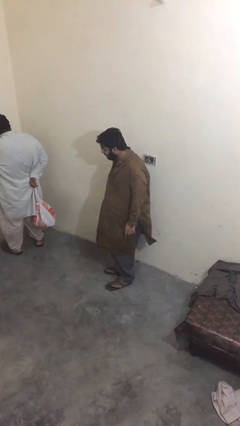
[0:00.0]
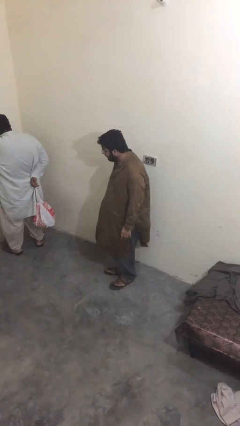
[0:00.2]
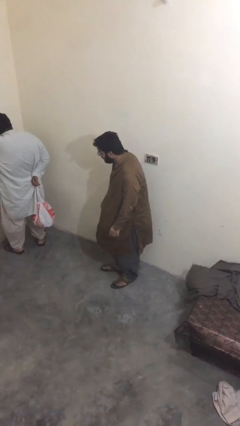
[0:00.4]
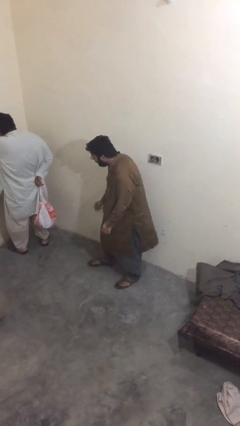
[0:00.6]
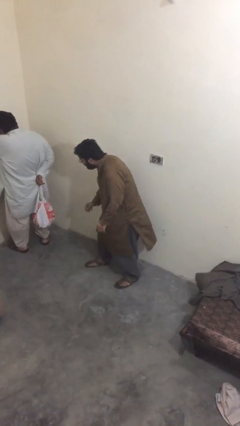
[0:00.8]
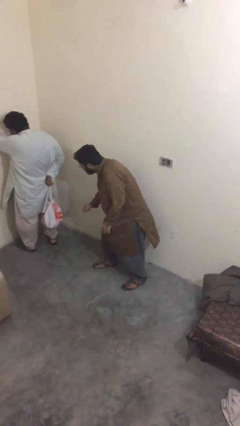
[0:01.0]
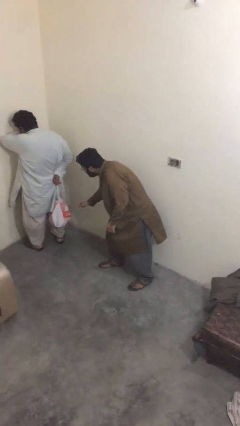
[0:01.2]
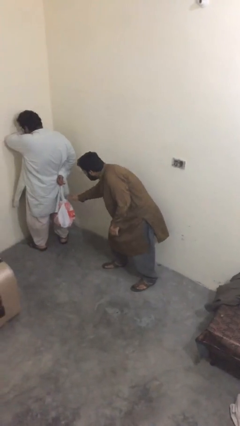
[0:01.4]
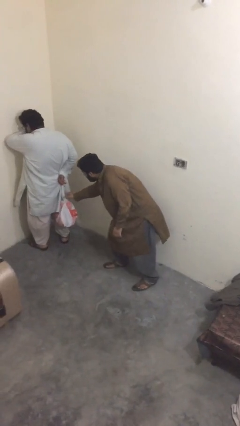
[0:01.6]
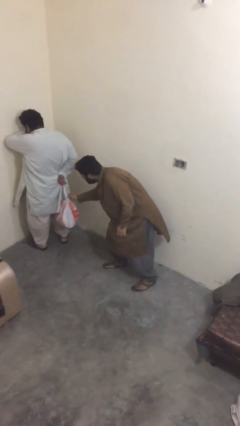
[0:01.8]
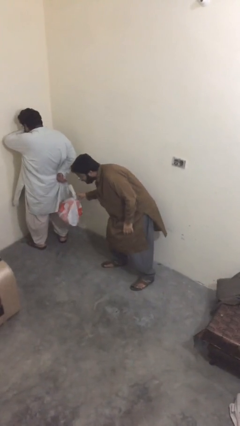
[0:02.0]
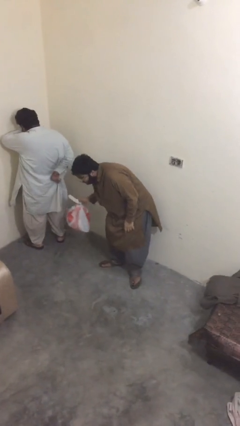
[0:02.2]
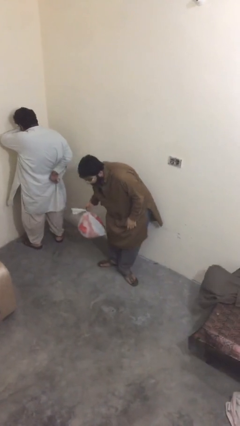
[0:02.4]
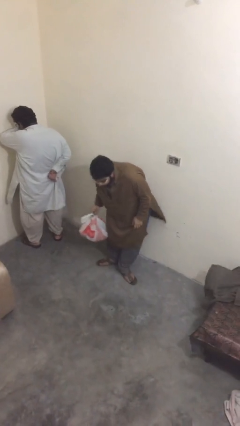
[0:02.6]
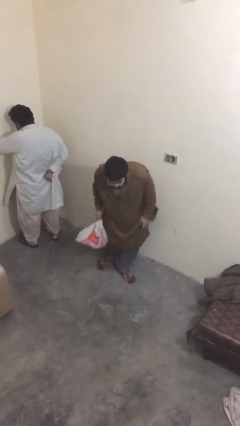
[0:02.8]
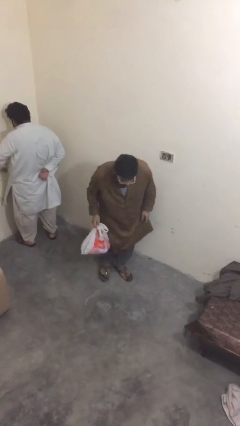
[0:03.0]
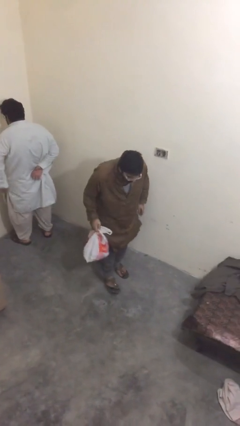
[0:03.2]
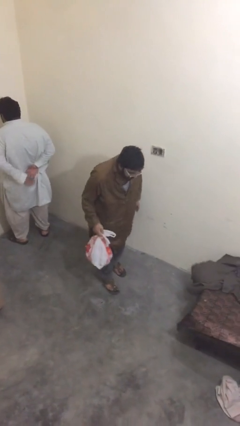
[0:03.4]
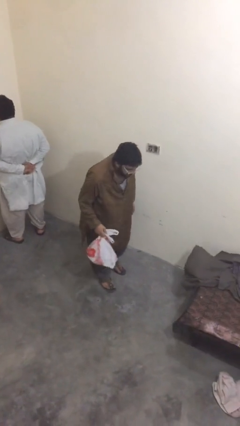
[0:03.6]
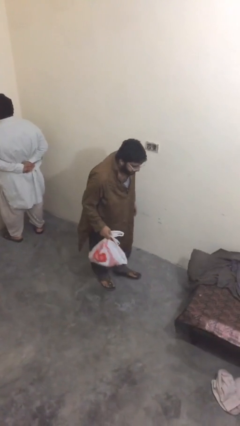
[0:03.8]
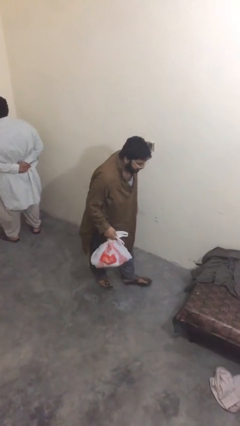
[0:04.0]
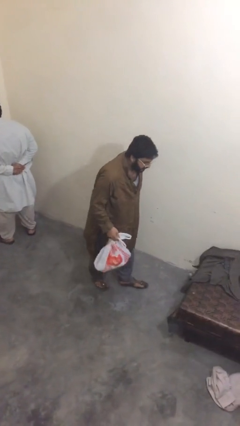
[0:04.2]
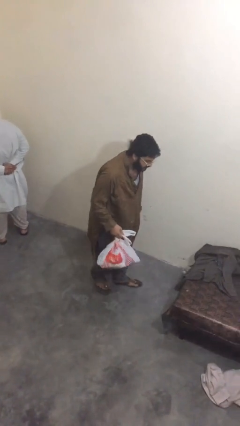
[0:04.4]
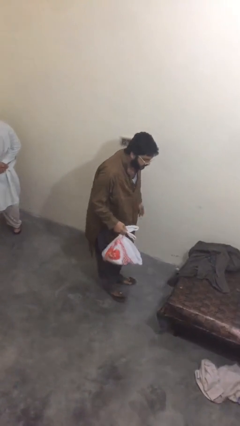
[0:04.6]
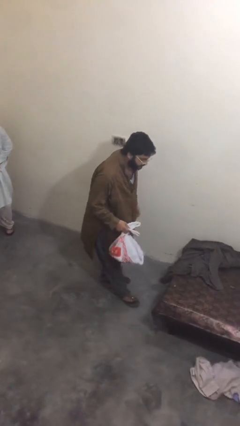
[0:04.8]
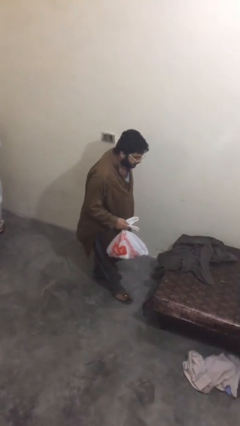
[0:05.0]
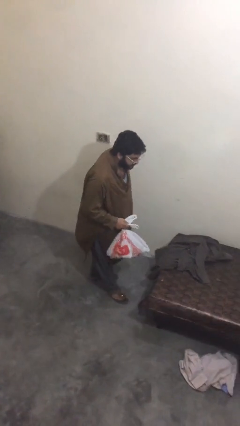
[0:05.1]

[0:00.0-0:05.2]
person steals object from person

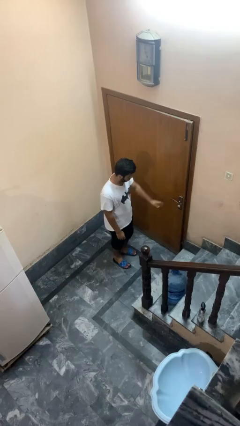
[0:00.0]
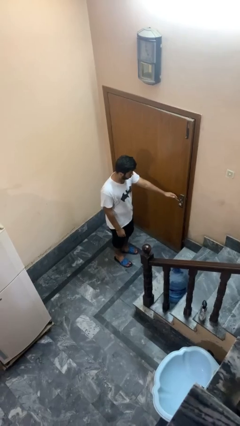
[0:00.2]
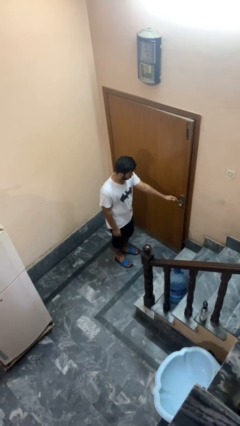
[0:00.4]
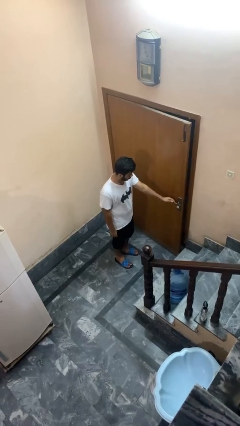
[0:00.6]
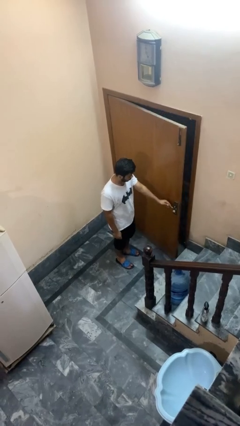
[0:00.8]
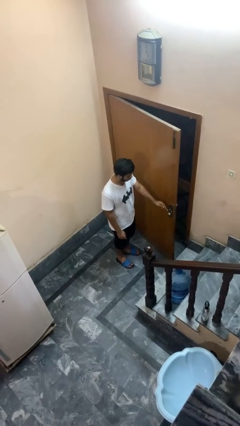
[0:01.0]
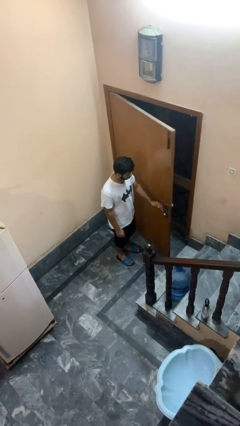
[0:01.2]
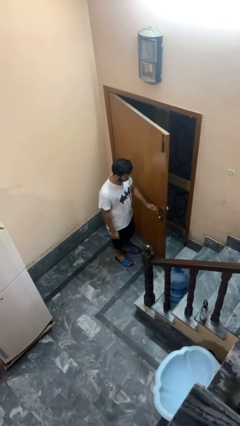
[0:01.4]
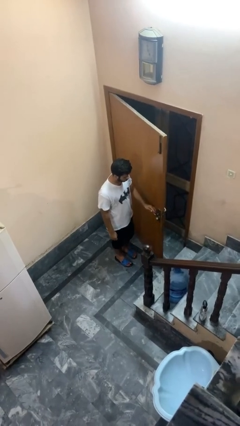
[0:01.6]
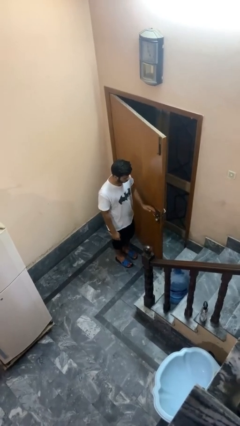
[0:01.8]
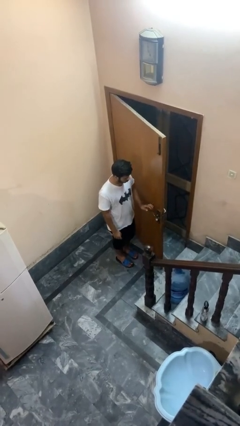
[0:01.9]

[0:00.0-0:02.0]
person opens facility door

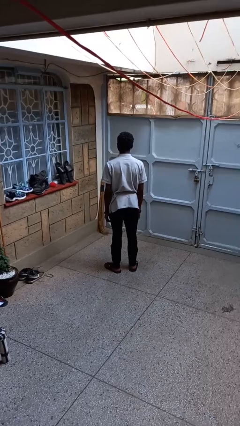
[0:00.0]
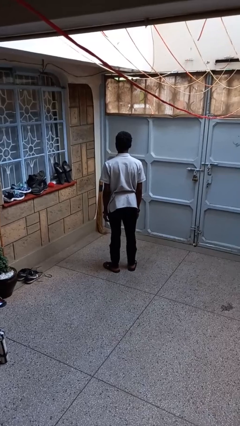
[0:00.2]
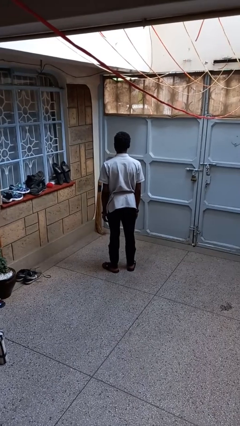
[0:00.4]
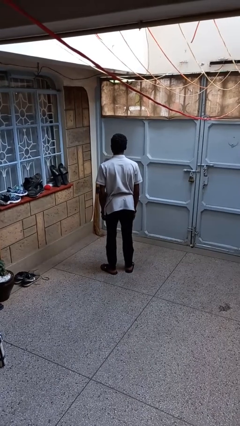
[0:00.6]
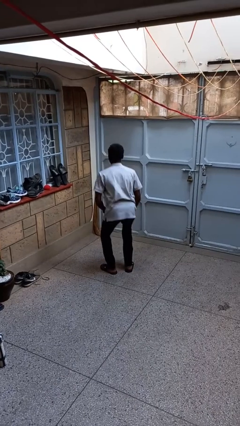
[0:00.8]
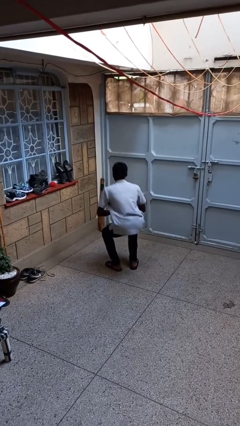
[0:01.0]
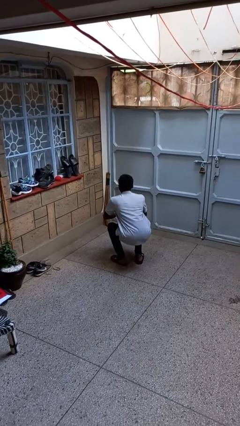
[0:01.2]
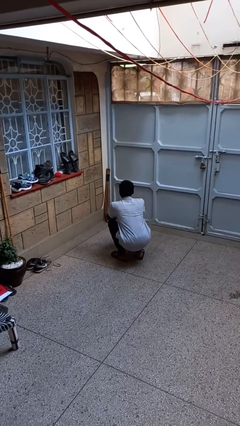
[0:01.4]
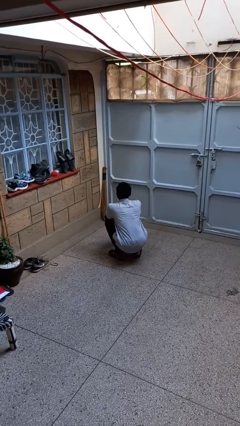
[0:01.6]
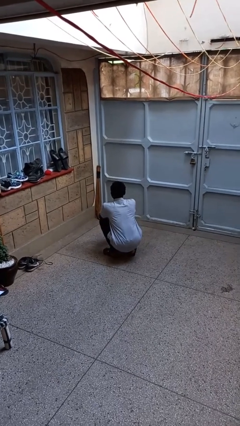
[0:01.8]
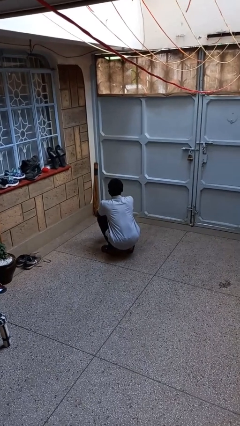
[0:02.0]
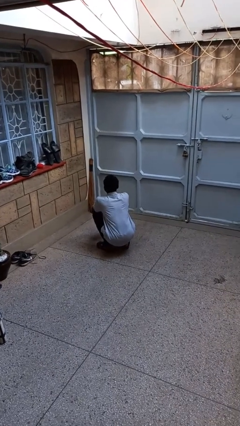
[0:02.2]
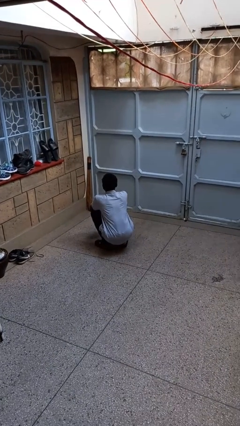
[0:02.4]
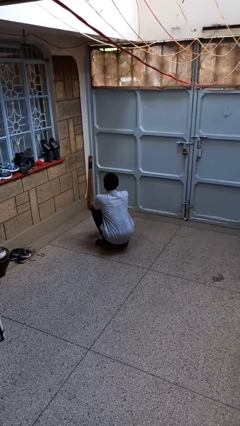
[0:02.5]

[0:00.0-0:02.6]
person squats

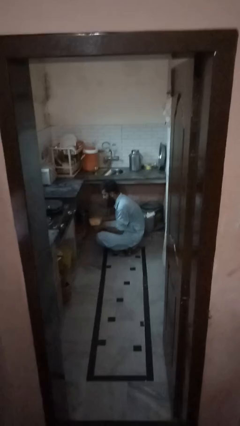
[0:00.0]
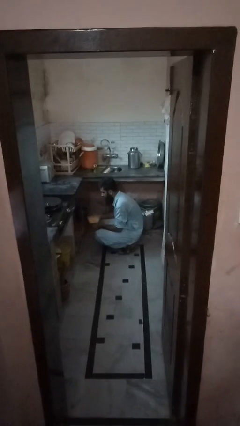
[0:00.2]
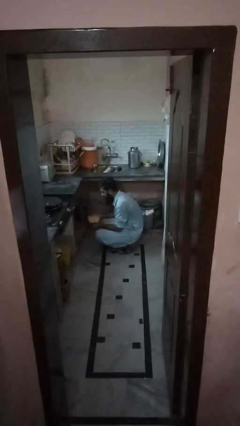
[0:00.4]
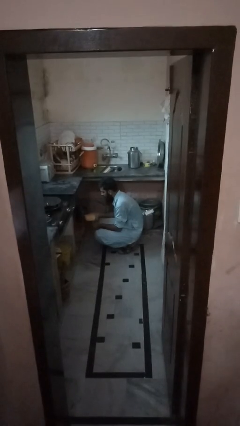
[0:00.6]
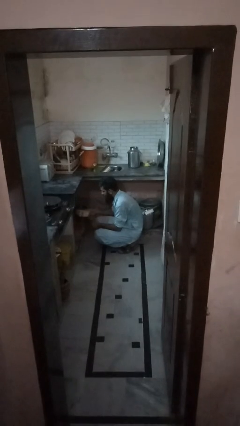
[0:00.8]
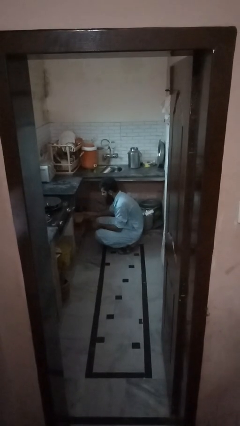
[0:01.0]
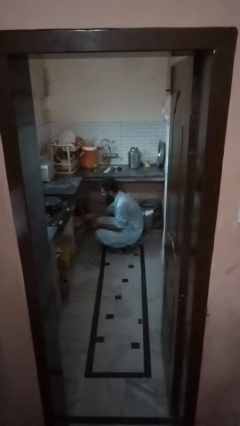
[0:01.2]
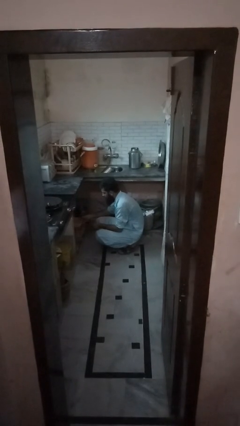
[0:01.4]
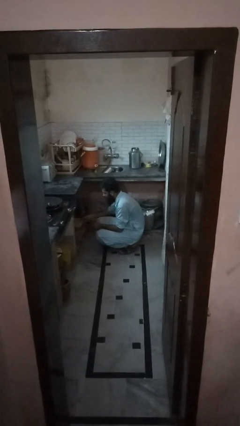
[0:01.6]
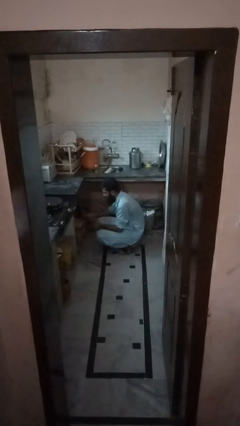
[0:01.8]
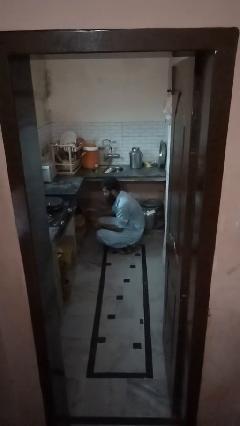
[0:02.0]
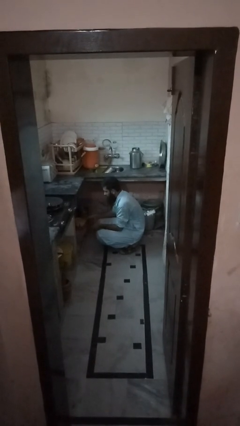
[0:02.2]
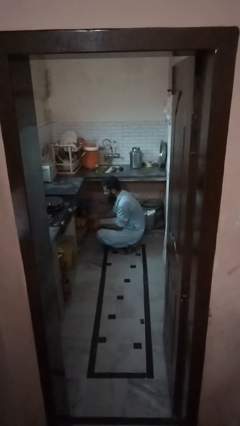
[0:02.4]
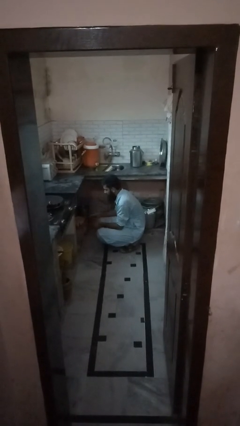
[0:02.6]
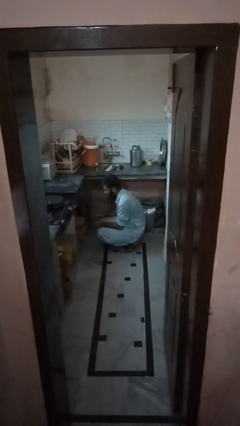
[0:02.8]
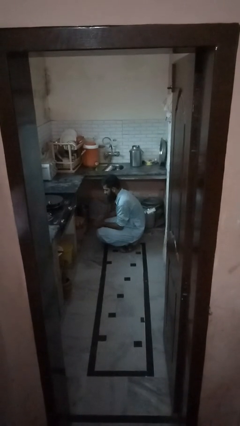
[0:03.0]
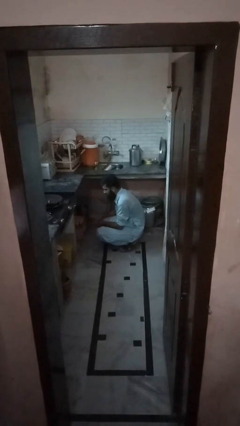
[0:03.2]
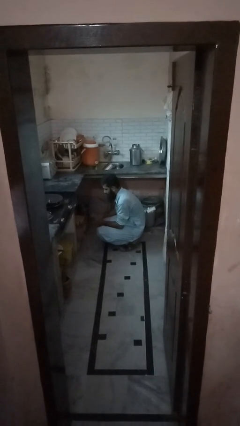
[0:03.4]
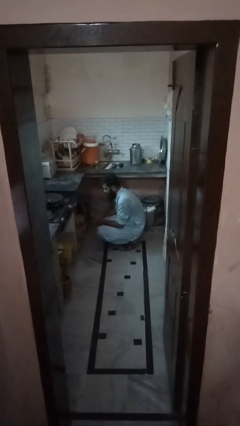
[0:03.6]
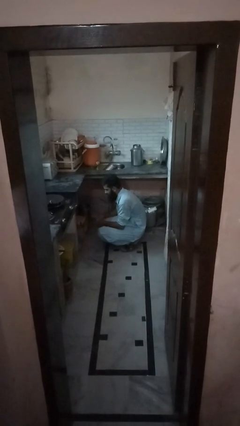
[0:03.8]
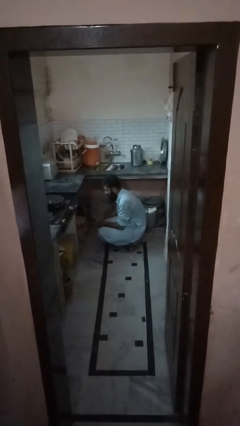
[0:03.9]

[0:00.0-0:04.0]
person puts down object into cabinet

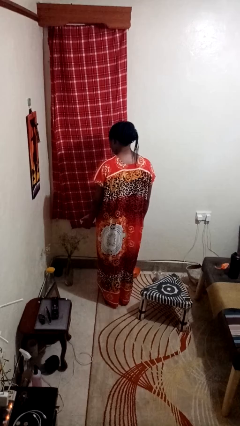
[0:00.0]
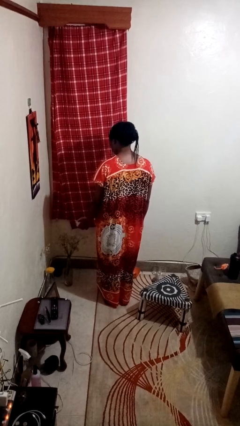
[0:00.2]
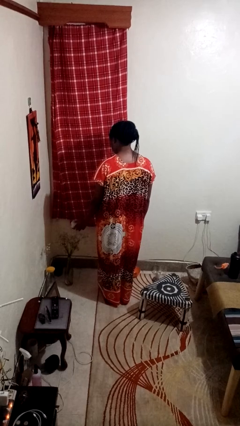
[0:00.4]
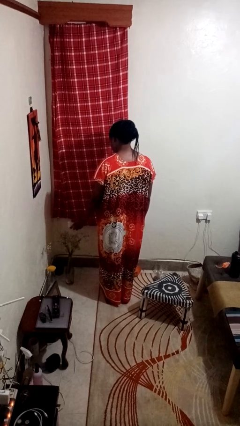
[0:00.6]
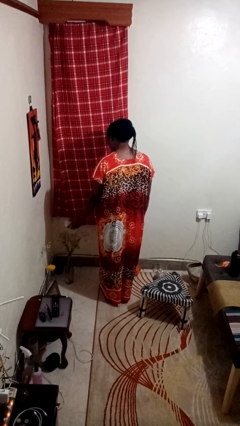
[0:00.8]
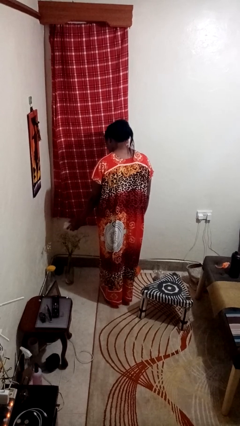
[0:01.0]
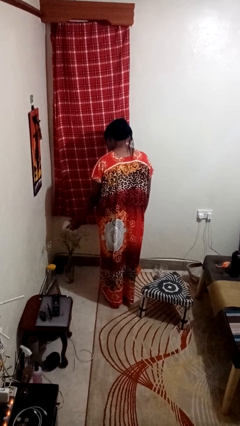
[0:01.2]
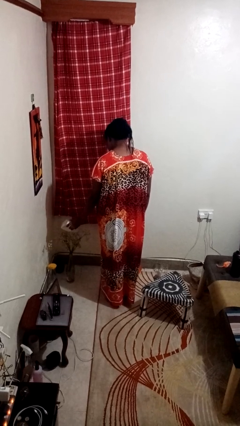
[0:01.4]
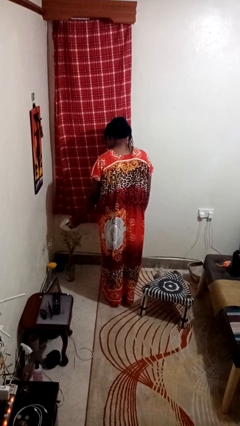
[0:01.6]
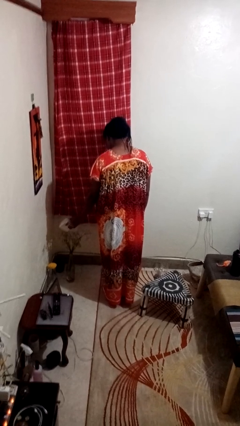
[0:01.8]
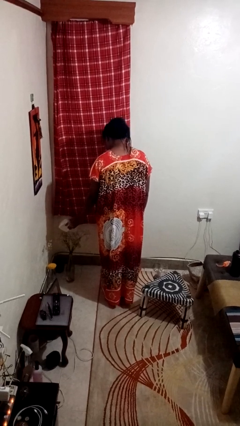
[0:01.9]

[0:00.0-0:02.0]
person waters houseplant

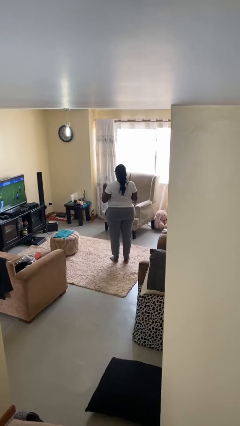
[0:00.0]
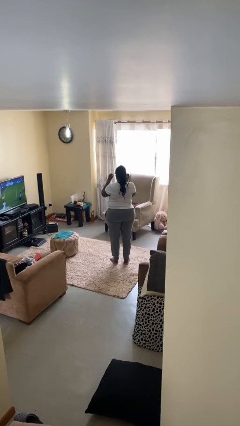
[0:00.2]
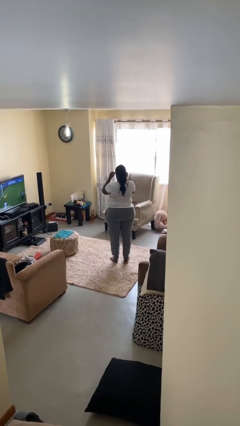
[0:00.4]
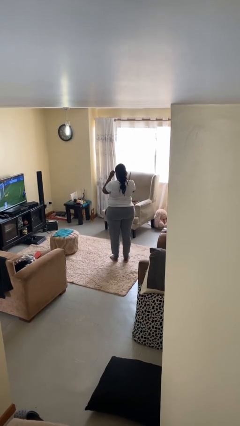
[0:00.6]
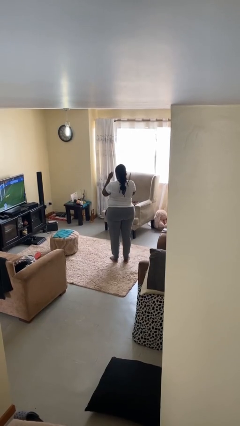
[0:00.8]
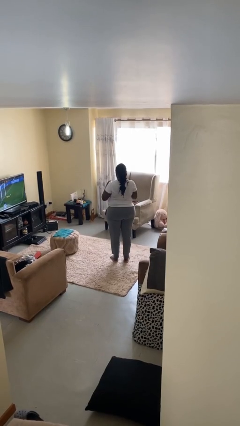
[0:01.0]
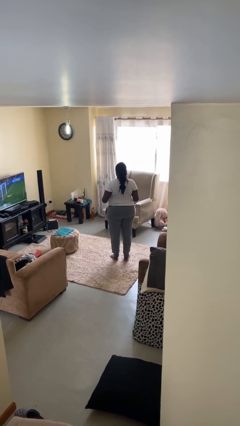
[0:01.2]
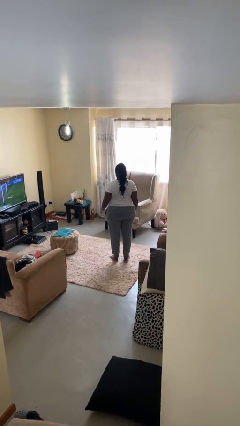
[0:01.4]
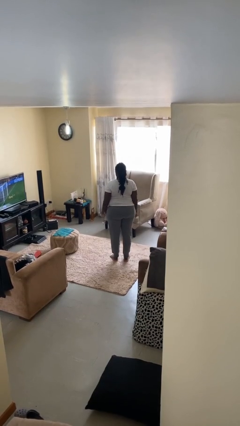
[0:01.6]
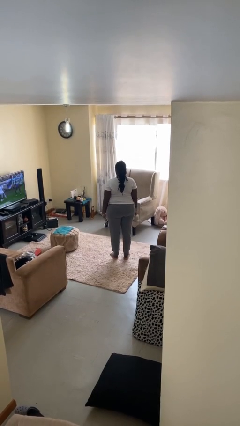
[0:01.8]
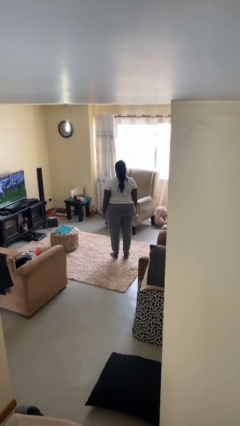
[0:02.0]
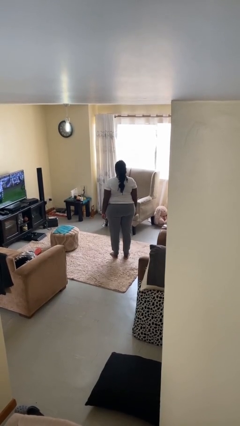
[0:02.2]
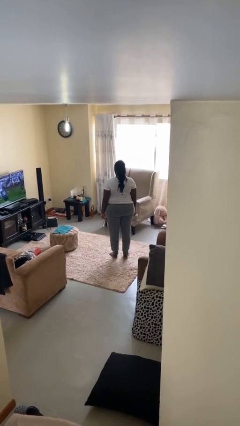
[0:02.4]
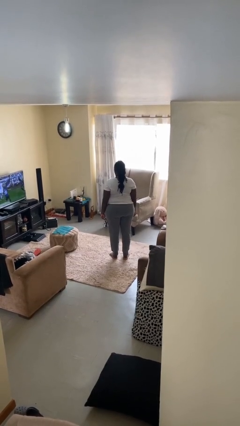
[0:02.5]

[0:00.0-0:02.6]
person takes off glasses
